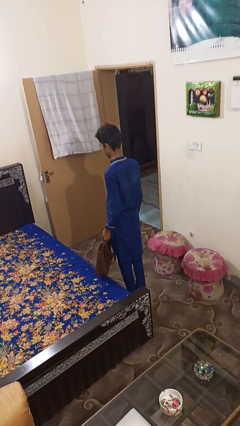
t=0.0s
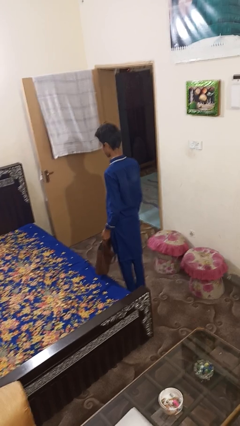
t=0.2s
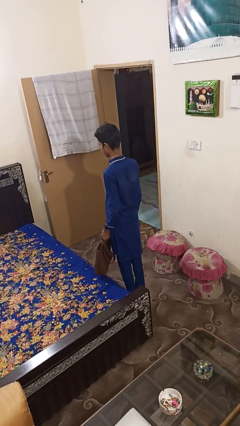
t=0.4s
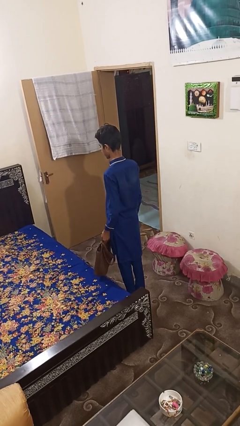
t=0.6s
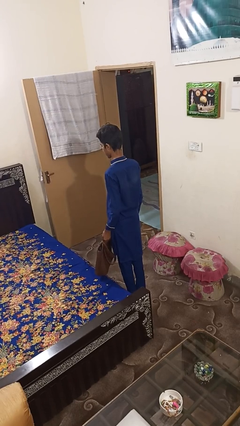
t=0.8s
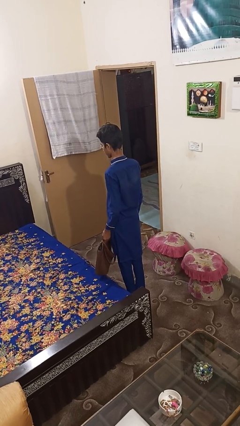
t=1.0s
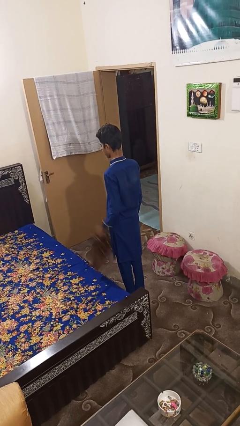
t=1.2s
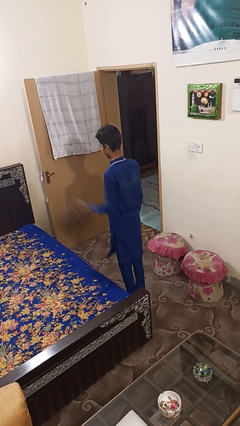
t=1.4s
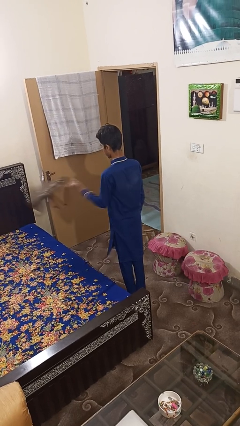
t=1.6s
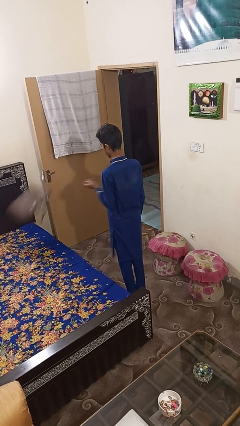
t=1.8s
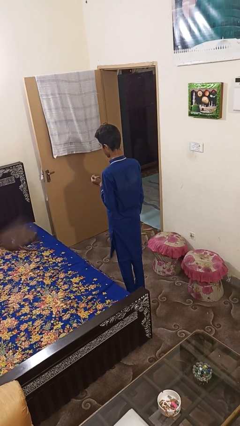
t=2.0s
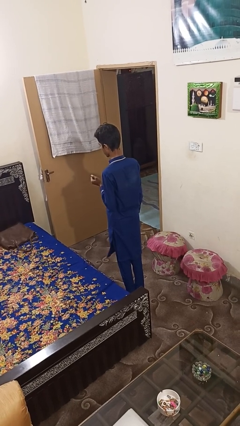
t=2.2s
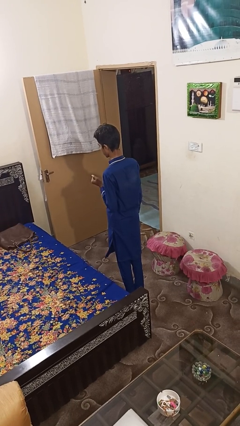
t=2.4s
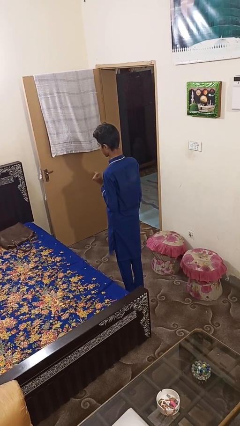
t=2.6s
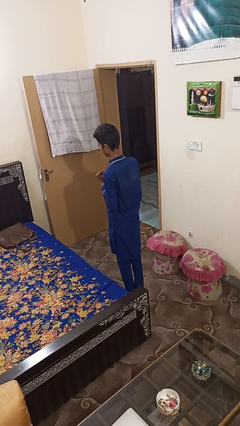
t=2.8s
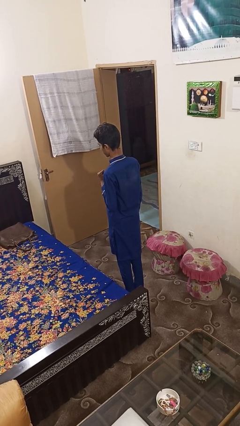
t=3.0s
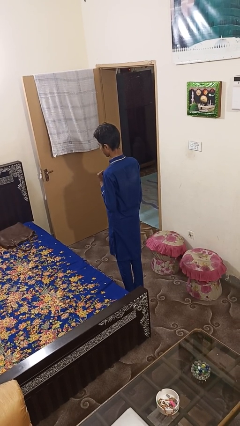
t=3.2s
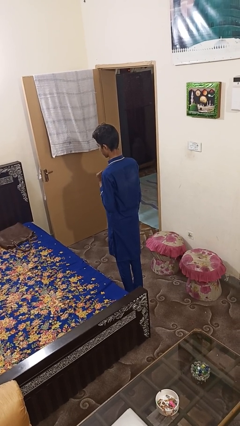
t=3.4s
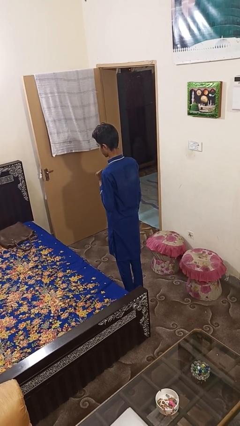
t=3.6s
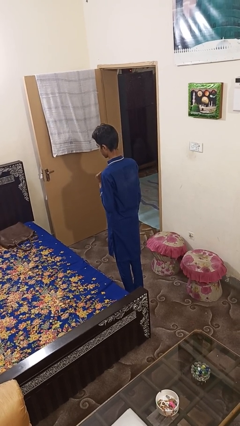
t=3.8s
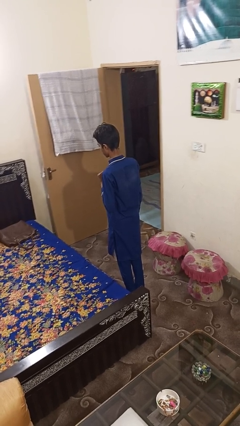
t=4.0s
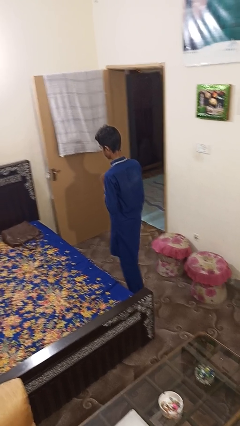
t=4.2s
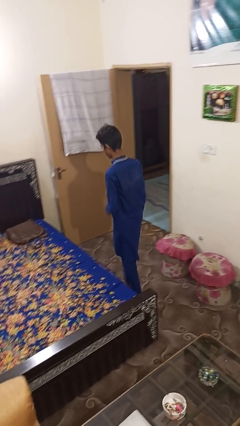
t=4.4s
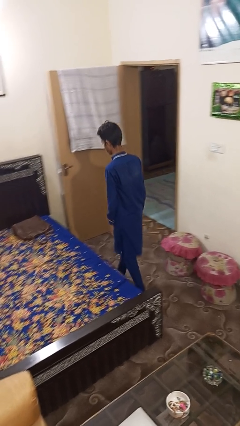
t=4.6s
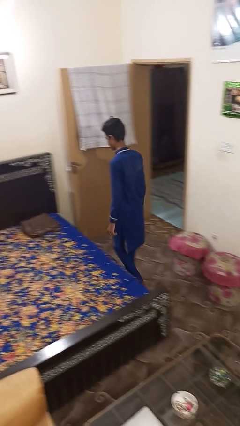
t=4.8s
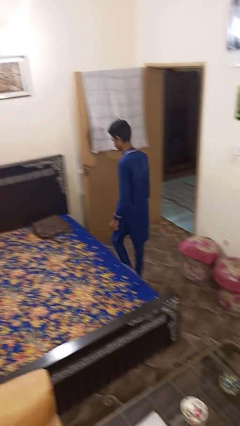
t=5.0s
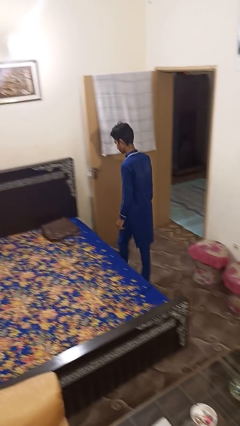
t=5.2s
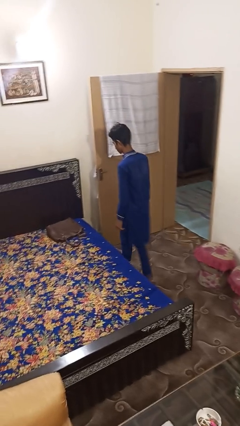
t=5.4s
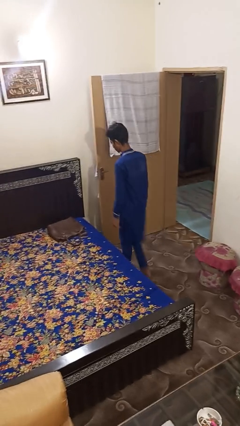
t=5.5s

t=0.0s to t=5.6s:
person throws object on bed

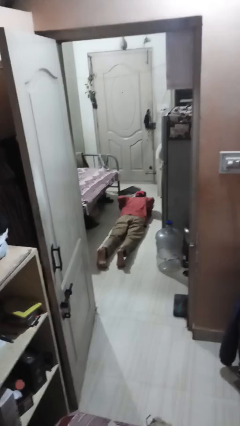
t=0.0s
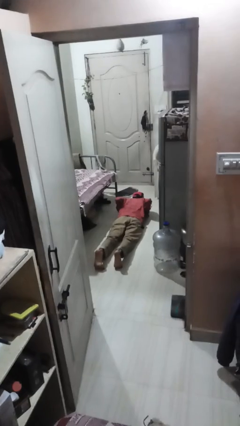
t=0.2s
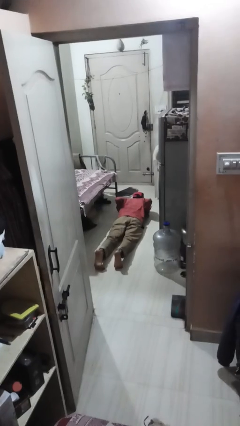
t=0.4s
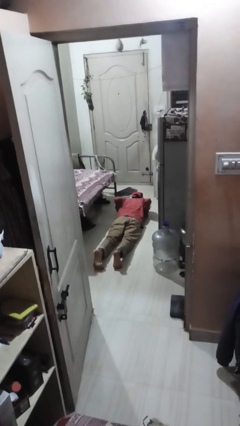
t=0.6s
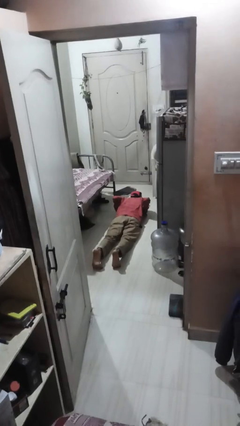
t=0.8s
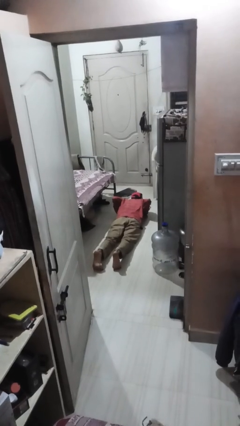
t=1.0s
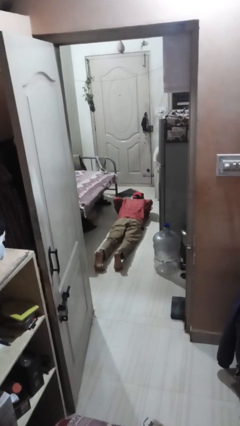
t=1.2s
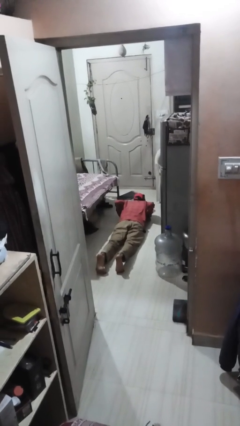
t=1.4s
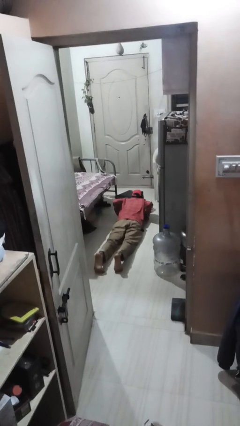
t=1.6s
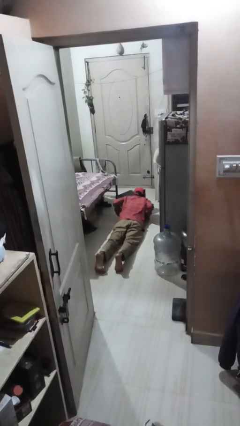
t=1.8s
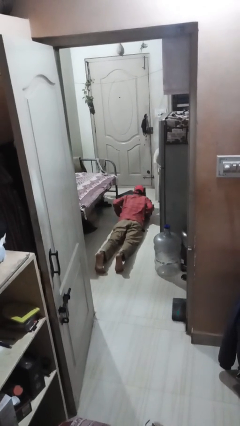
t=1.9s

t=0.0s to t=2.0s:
person exercises with pushup

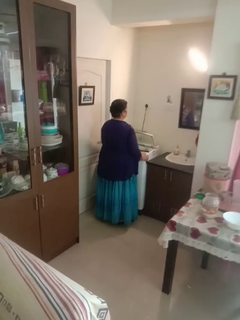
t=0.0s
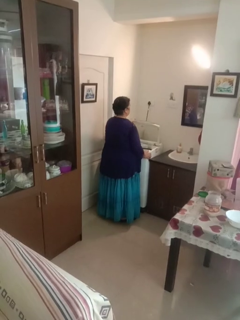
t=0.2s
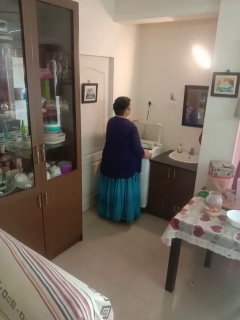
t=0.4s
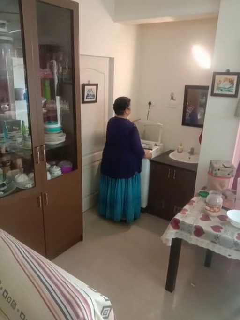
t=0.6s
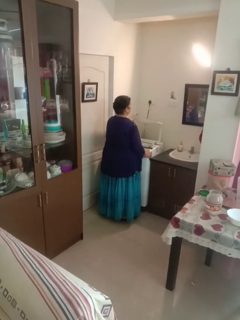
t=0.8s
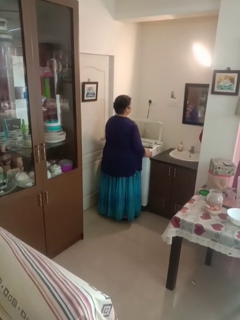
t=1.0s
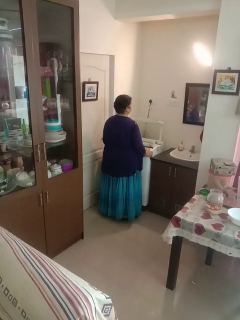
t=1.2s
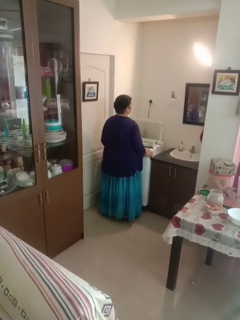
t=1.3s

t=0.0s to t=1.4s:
person opens clothes washer

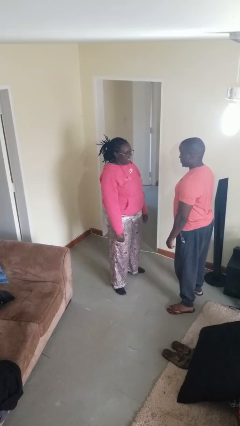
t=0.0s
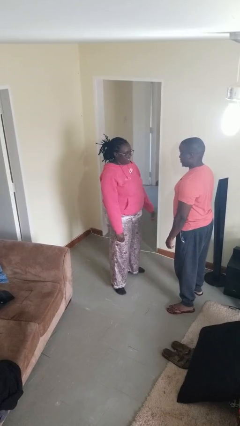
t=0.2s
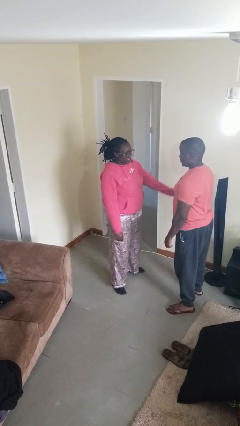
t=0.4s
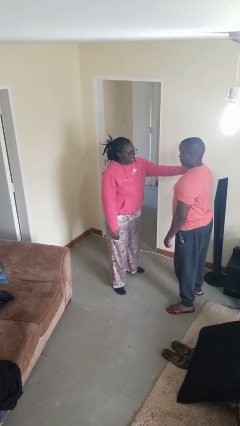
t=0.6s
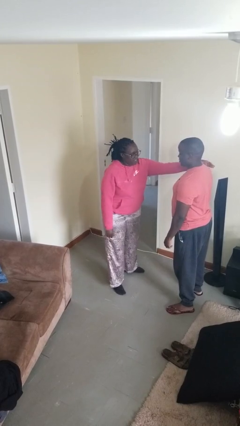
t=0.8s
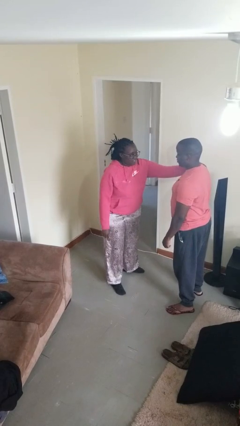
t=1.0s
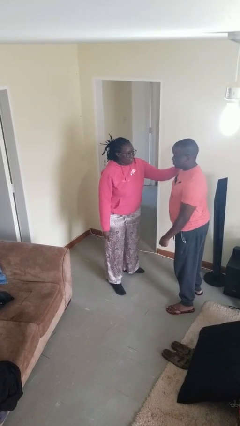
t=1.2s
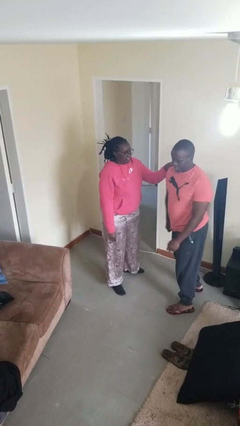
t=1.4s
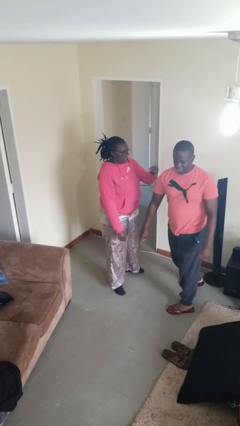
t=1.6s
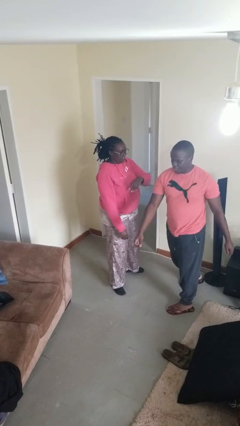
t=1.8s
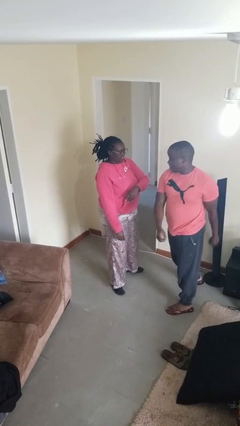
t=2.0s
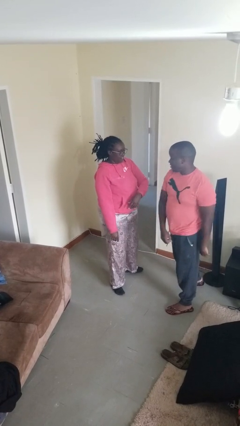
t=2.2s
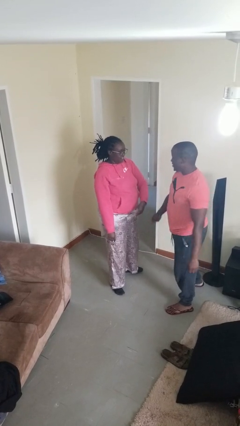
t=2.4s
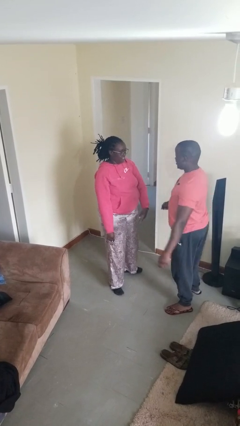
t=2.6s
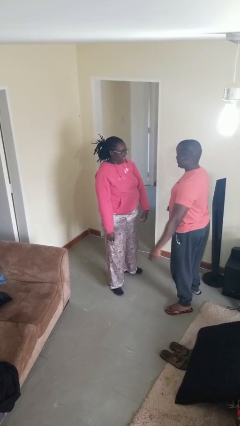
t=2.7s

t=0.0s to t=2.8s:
person shoves person

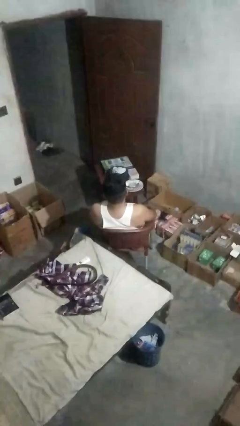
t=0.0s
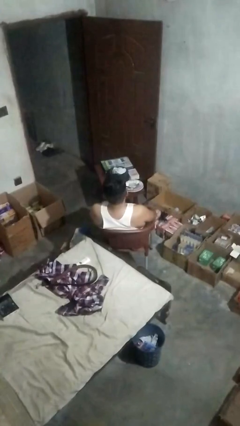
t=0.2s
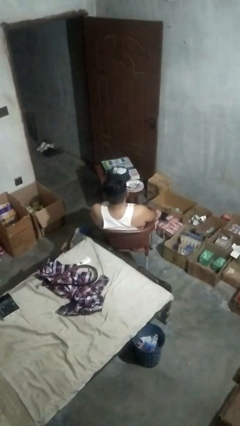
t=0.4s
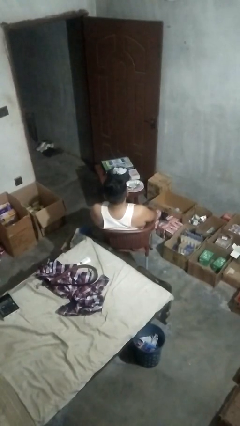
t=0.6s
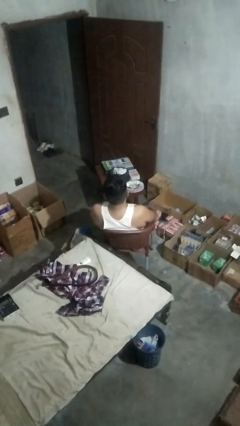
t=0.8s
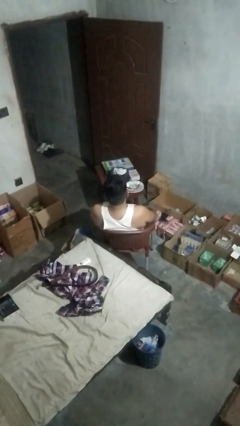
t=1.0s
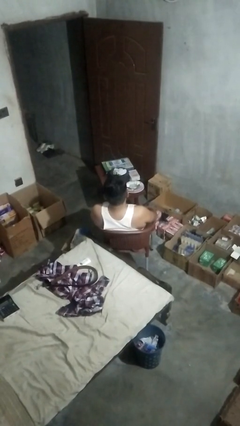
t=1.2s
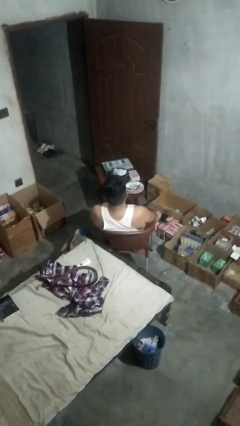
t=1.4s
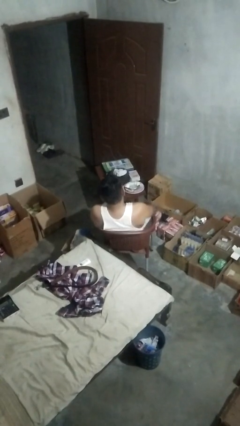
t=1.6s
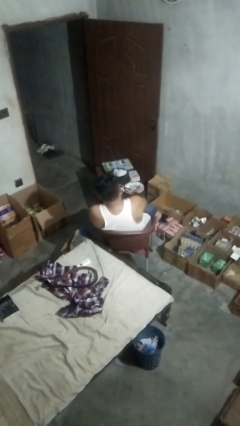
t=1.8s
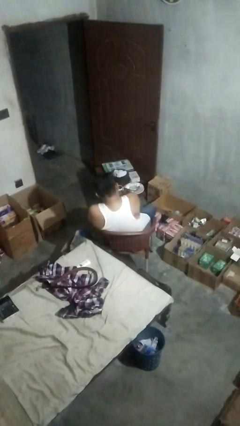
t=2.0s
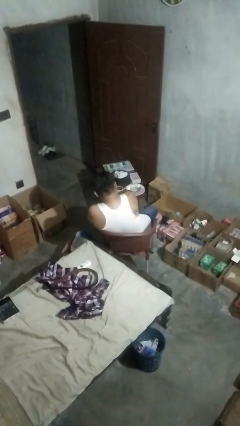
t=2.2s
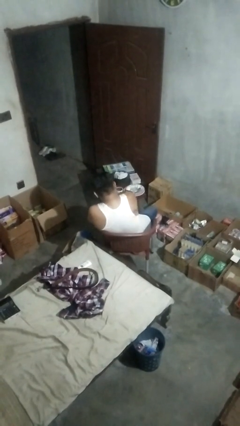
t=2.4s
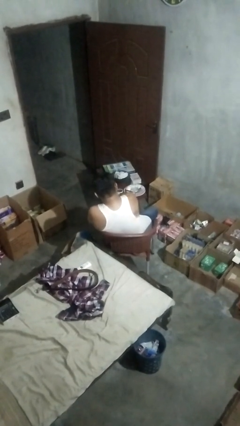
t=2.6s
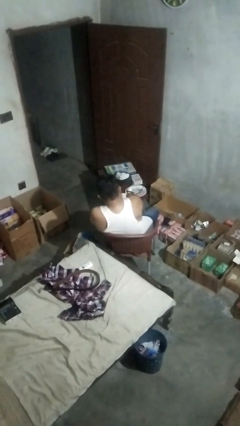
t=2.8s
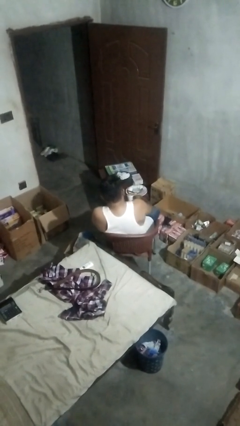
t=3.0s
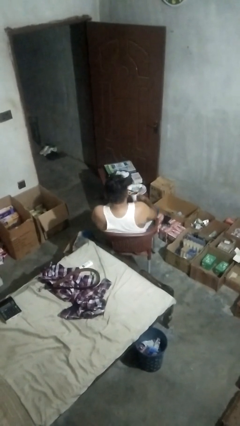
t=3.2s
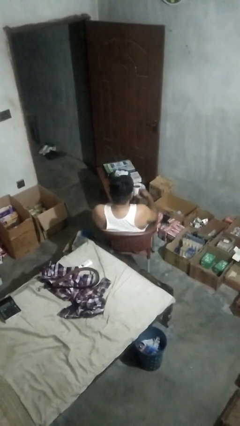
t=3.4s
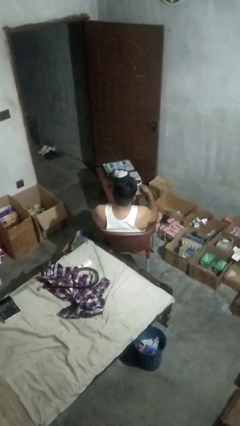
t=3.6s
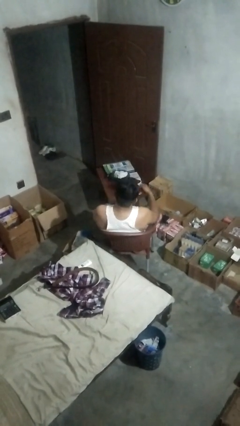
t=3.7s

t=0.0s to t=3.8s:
person picks up object from table

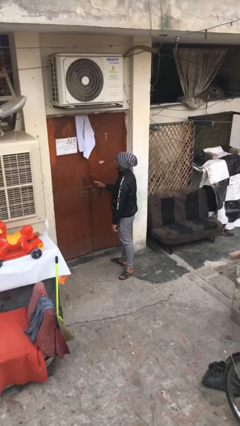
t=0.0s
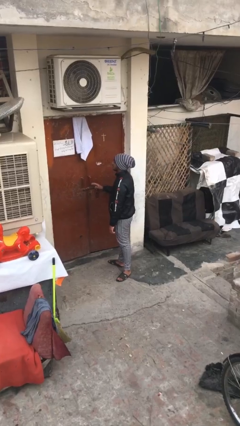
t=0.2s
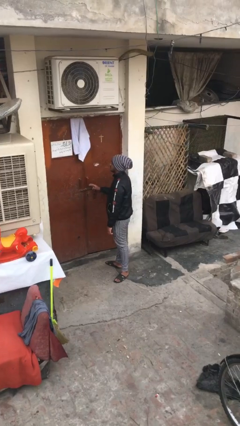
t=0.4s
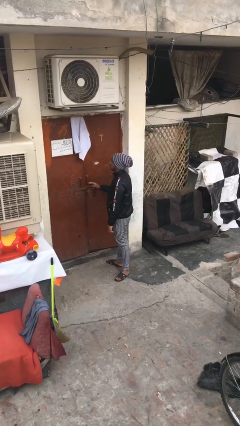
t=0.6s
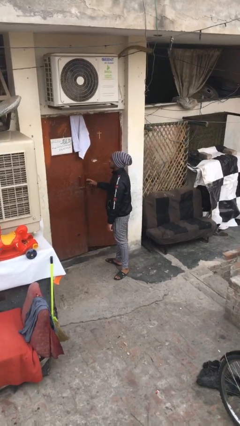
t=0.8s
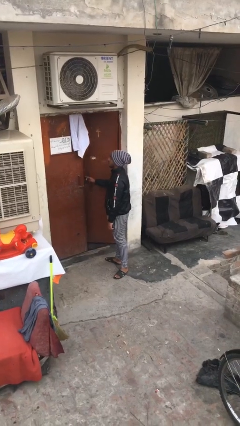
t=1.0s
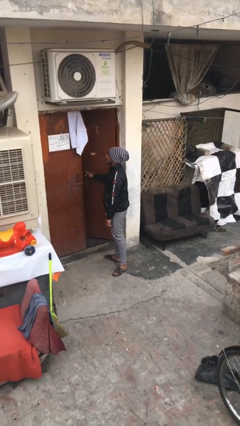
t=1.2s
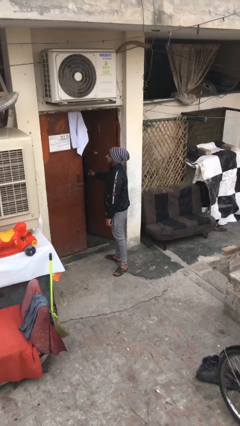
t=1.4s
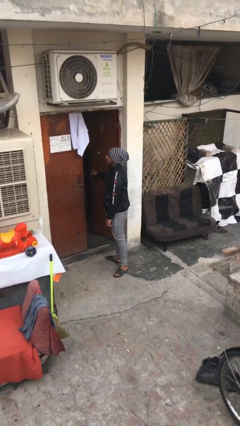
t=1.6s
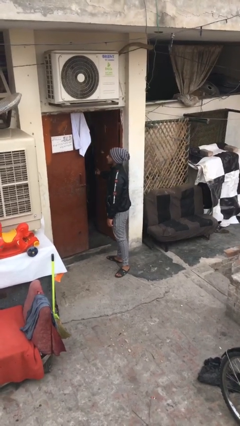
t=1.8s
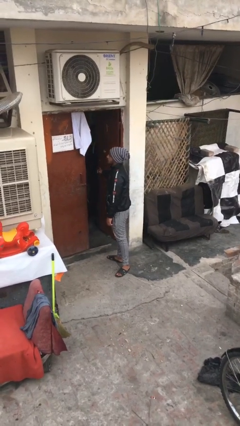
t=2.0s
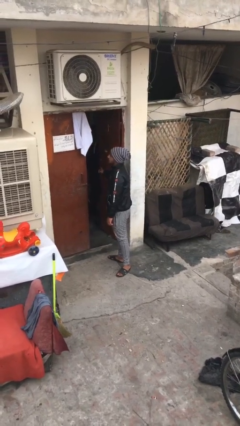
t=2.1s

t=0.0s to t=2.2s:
person opens facility door
